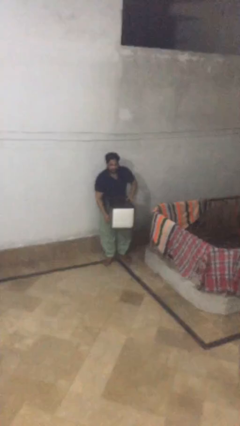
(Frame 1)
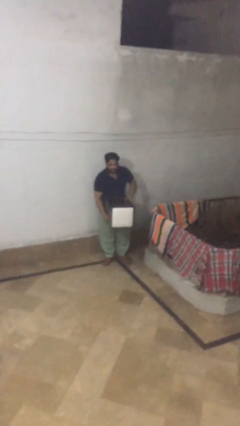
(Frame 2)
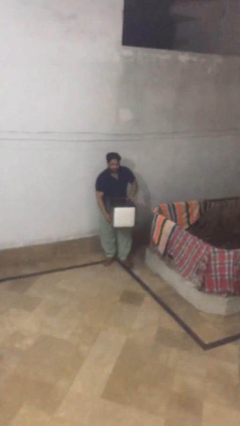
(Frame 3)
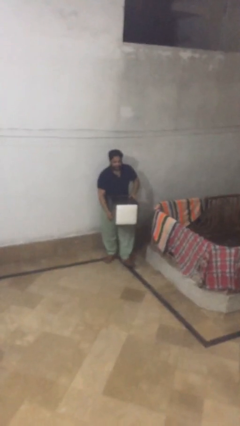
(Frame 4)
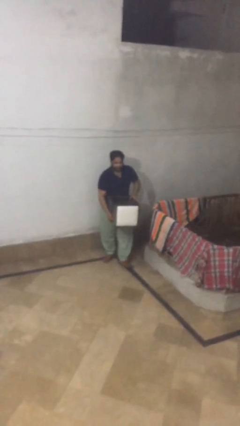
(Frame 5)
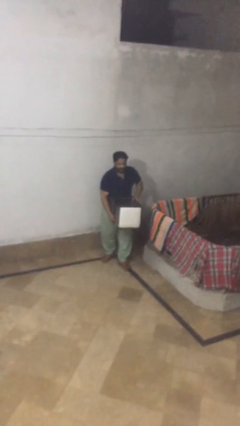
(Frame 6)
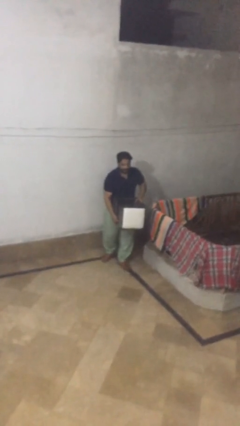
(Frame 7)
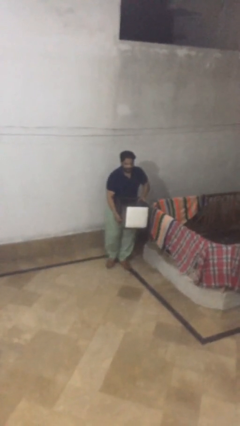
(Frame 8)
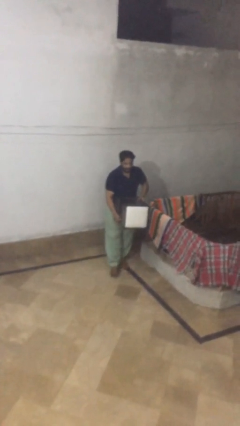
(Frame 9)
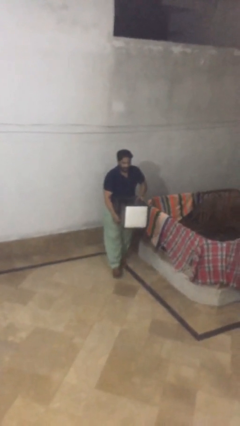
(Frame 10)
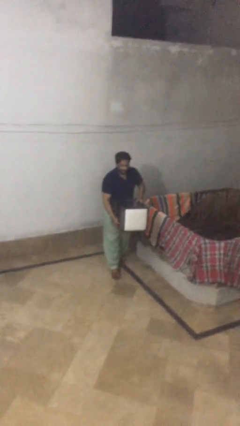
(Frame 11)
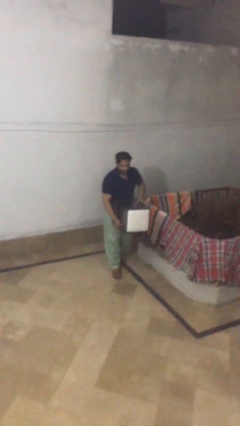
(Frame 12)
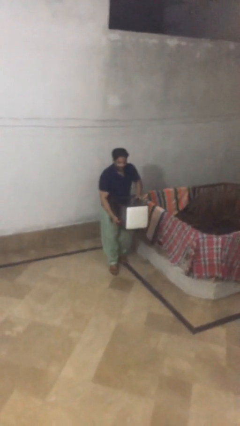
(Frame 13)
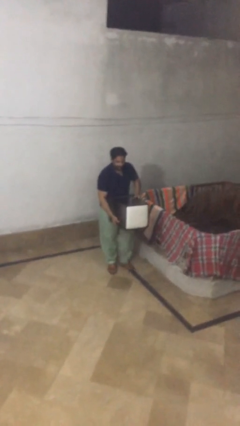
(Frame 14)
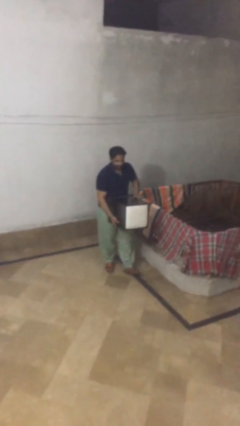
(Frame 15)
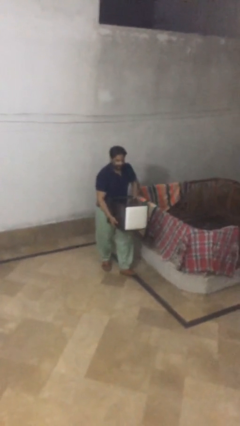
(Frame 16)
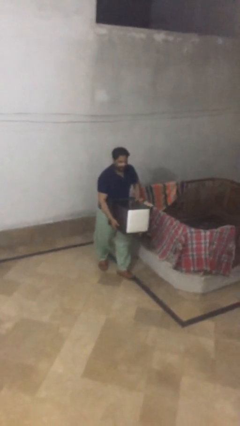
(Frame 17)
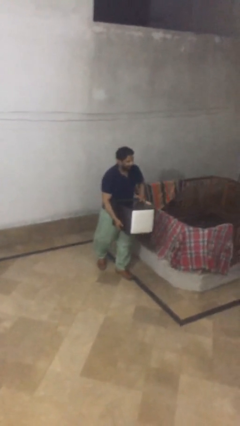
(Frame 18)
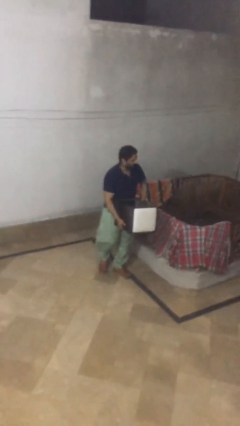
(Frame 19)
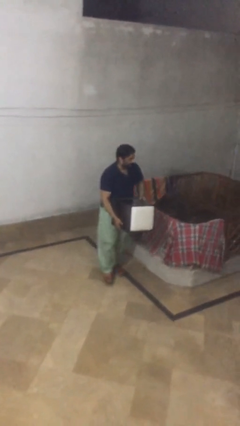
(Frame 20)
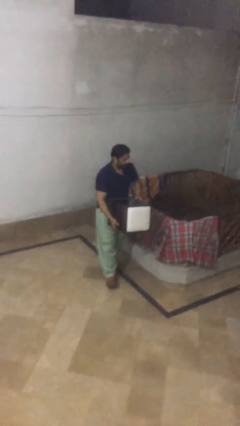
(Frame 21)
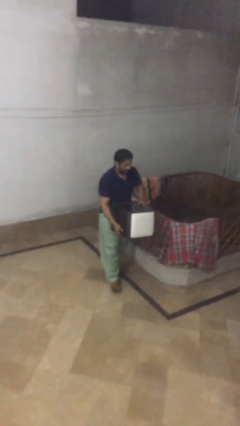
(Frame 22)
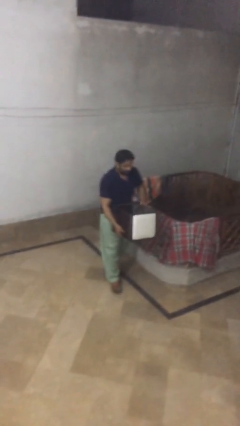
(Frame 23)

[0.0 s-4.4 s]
person carries heavy object

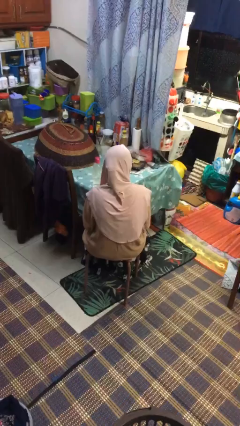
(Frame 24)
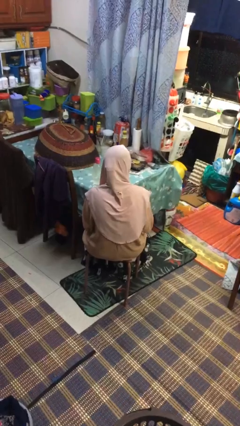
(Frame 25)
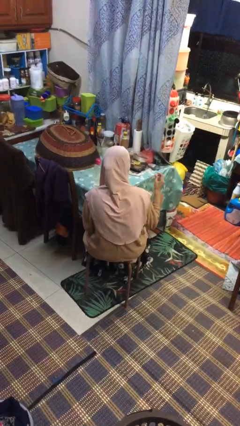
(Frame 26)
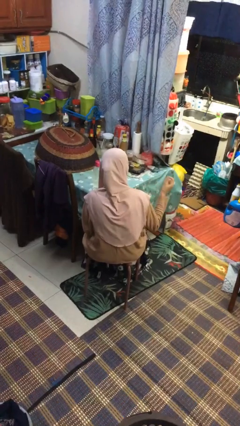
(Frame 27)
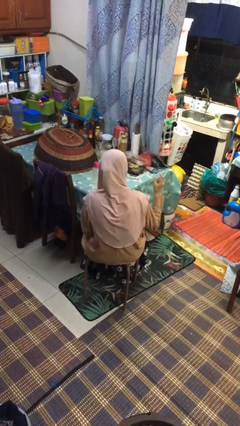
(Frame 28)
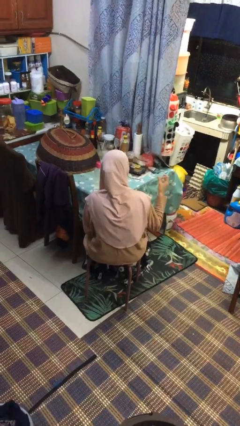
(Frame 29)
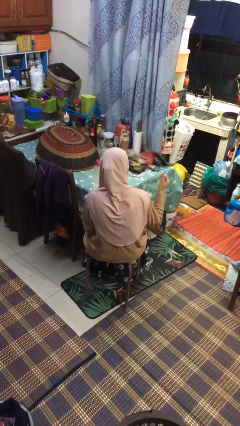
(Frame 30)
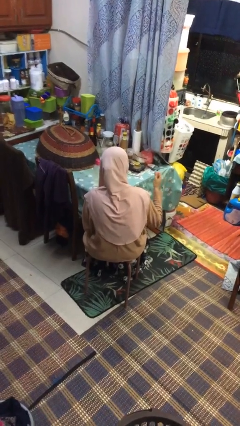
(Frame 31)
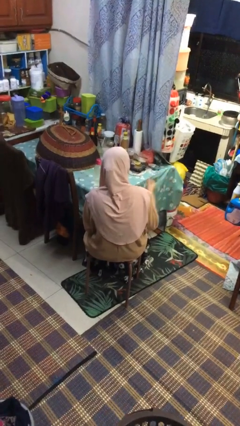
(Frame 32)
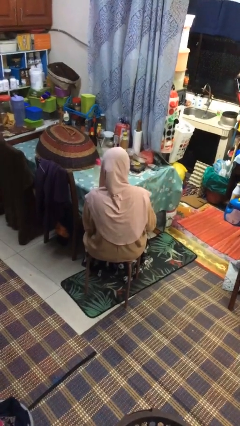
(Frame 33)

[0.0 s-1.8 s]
person snaps fingers

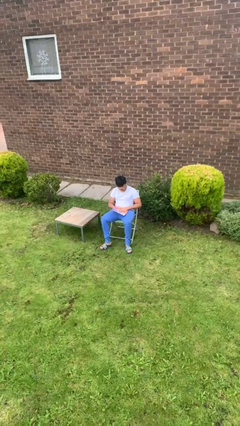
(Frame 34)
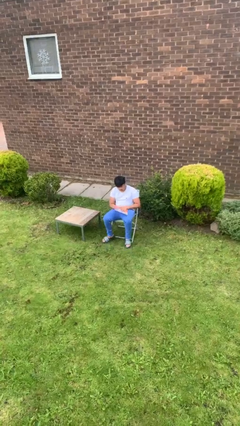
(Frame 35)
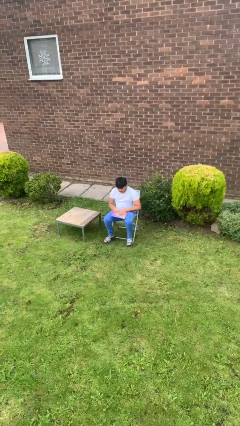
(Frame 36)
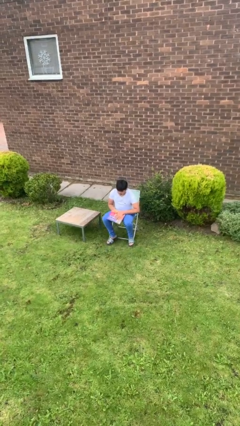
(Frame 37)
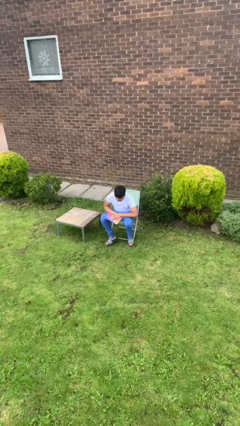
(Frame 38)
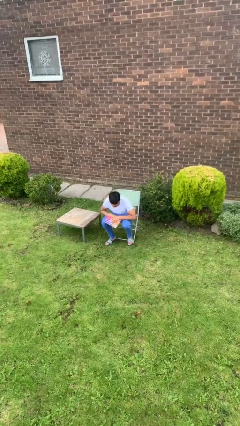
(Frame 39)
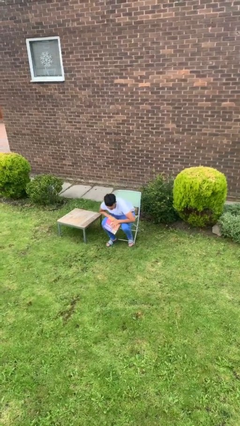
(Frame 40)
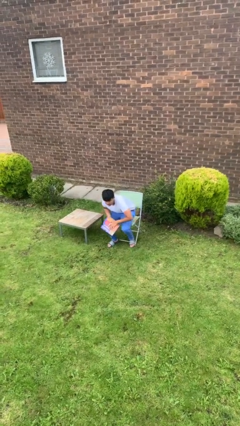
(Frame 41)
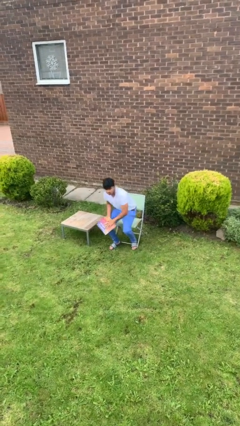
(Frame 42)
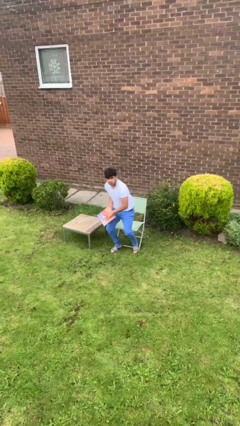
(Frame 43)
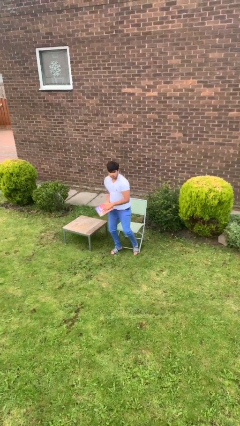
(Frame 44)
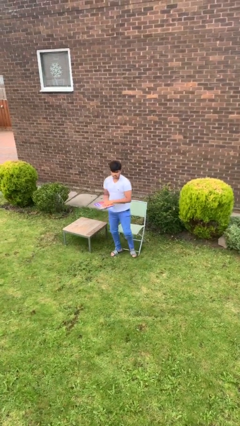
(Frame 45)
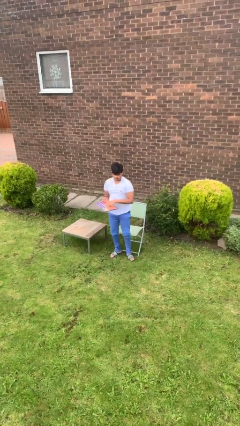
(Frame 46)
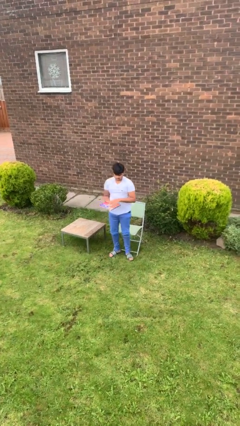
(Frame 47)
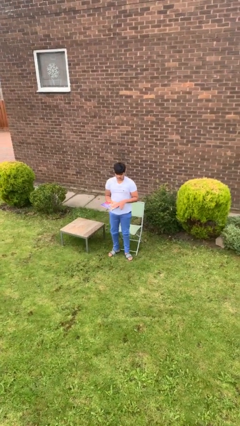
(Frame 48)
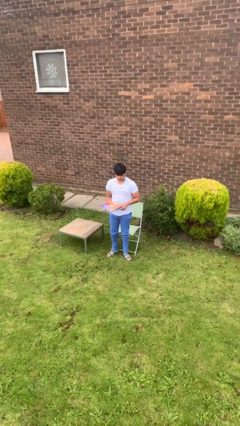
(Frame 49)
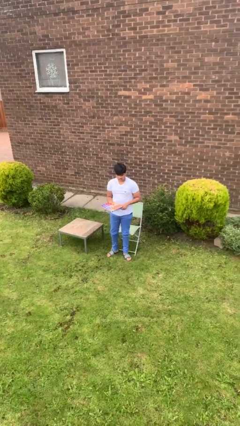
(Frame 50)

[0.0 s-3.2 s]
person stands up

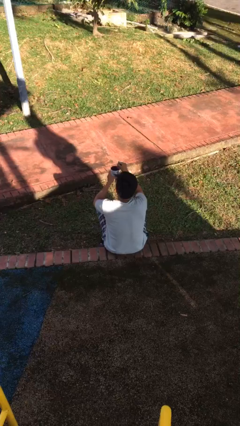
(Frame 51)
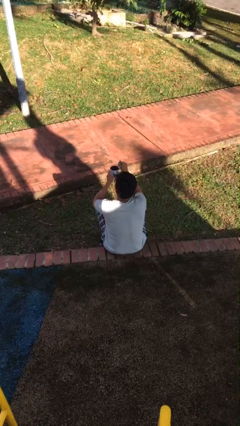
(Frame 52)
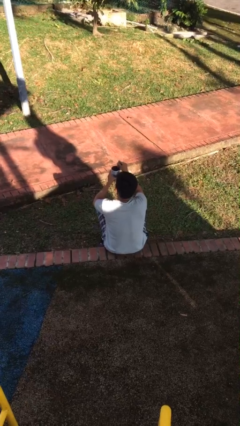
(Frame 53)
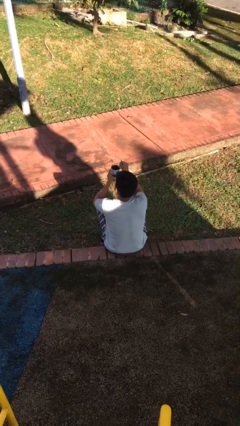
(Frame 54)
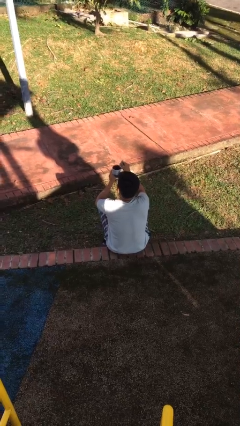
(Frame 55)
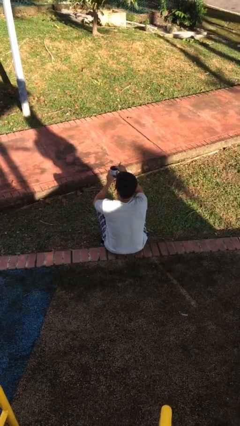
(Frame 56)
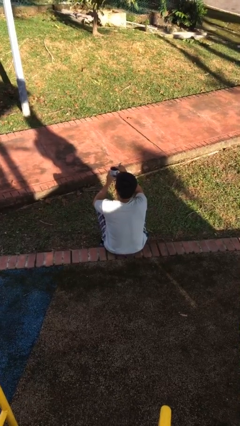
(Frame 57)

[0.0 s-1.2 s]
person stirs mug

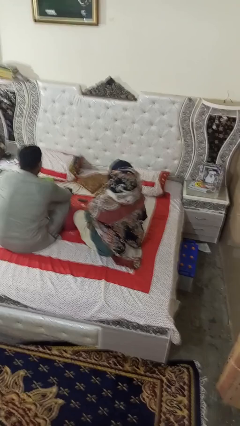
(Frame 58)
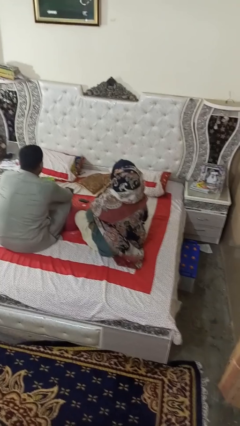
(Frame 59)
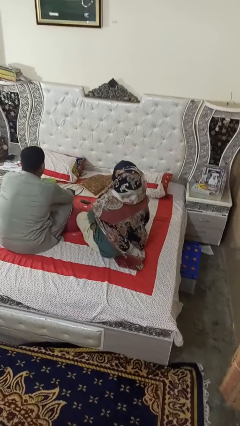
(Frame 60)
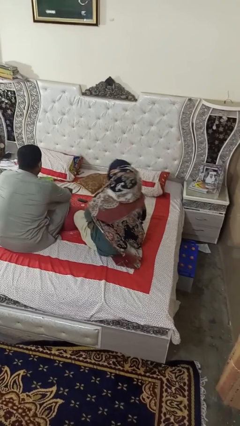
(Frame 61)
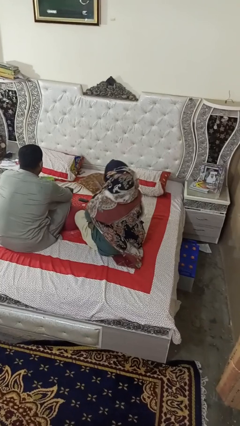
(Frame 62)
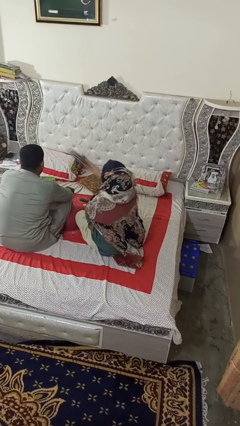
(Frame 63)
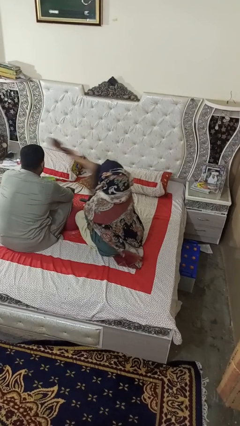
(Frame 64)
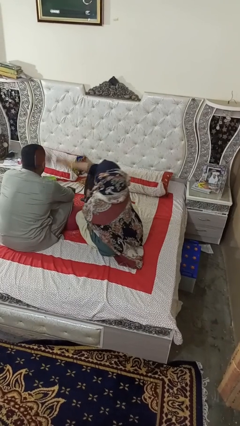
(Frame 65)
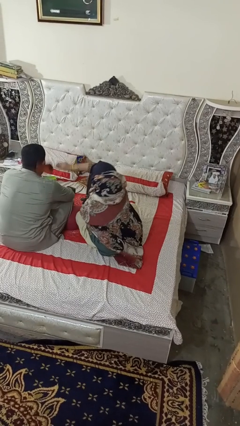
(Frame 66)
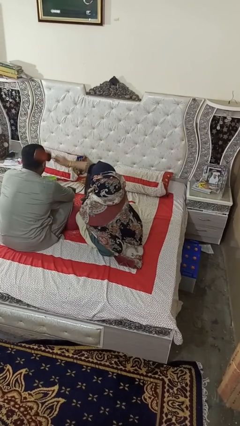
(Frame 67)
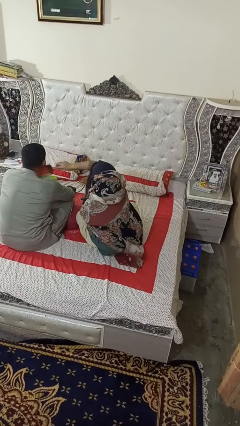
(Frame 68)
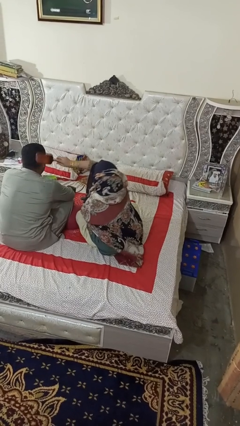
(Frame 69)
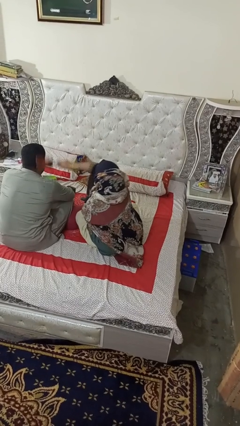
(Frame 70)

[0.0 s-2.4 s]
person brushes hair of person

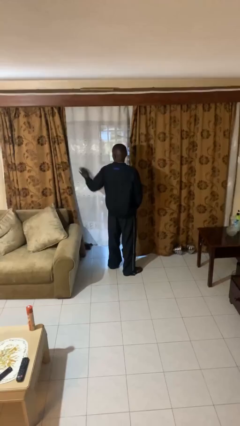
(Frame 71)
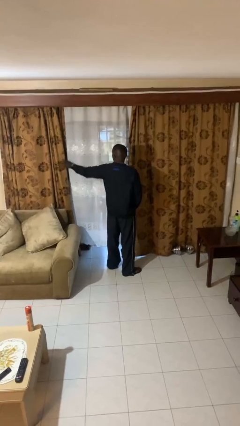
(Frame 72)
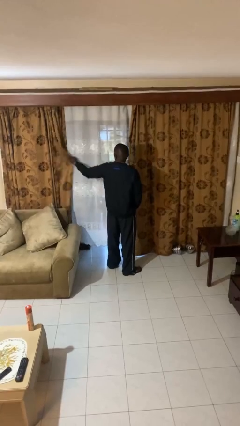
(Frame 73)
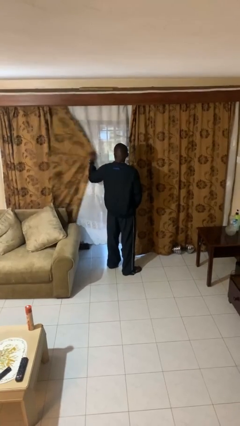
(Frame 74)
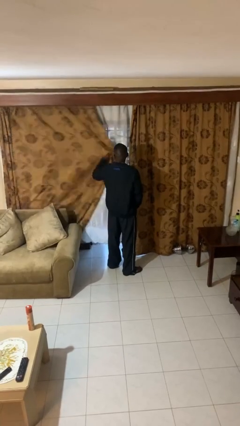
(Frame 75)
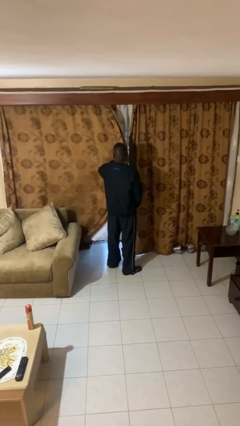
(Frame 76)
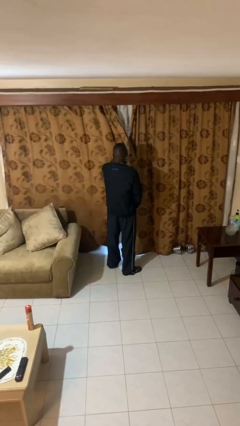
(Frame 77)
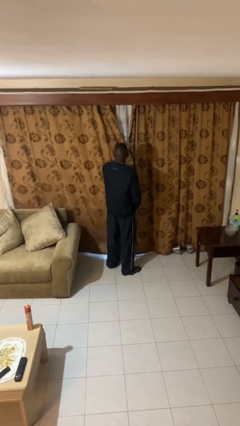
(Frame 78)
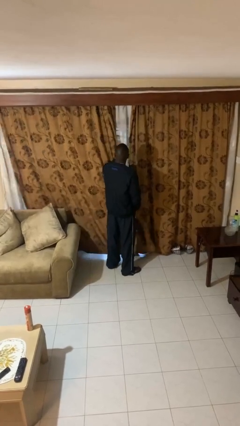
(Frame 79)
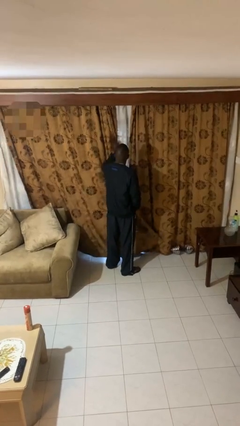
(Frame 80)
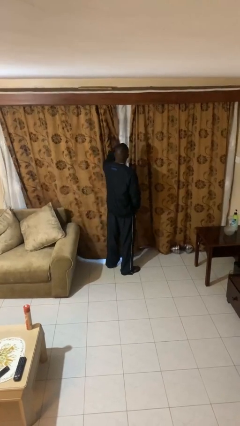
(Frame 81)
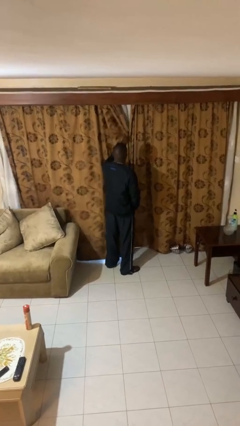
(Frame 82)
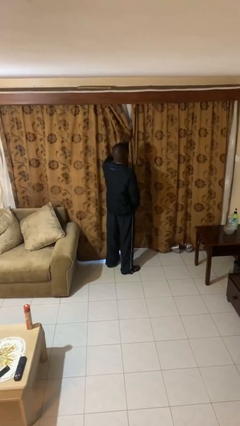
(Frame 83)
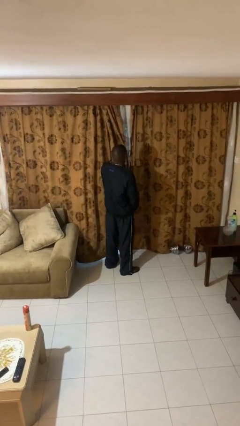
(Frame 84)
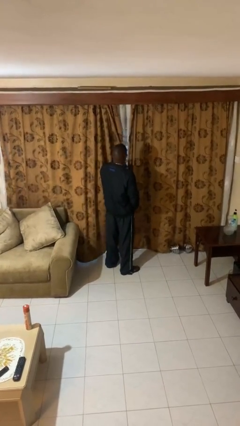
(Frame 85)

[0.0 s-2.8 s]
person closes curtains

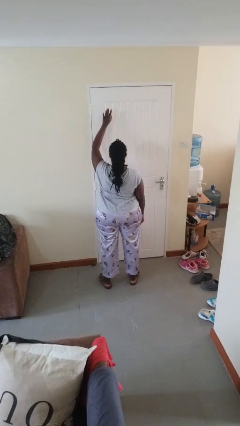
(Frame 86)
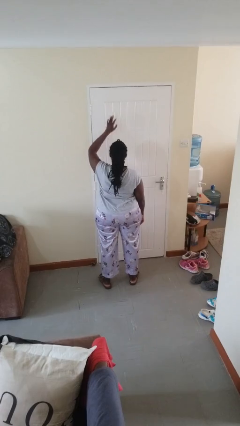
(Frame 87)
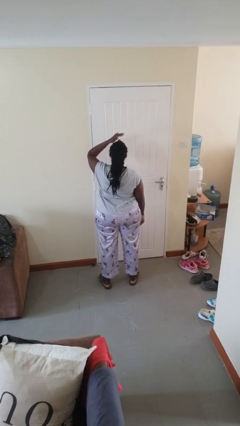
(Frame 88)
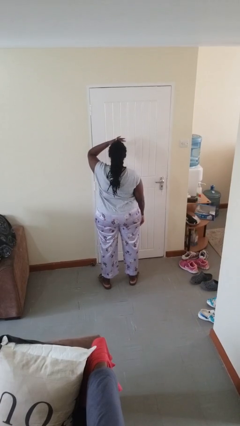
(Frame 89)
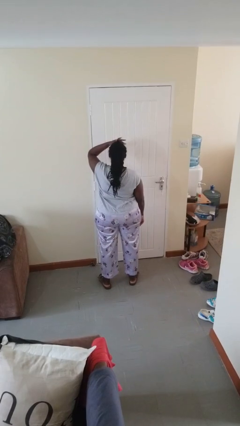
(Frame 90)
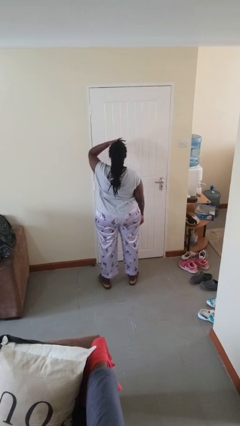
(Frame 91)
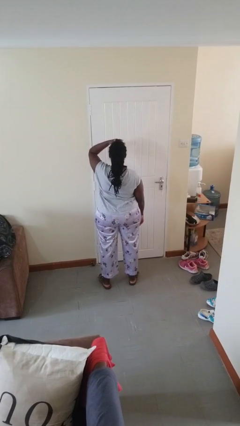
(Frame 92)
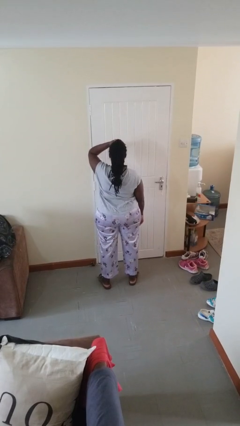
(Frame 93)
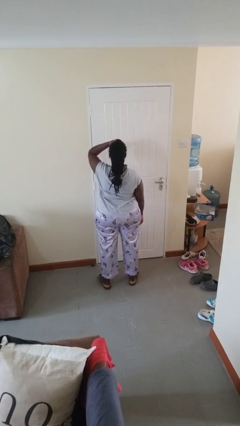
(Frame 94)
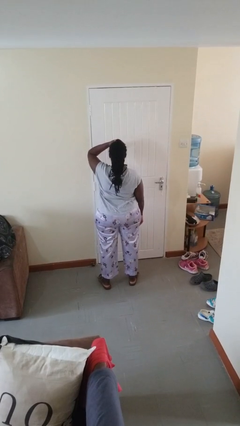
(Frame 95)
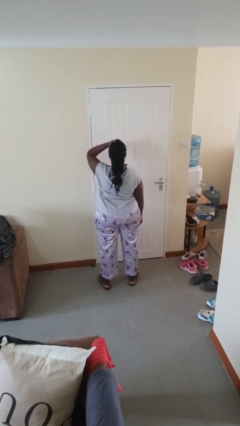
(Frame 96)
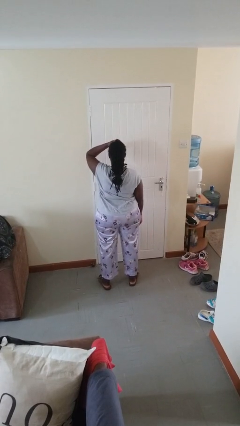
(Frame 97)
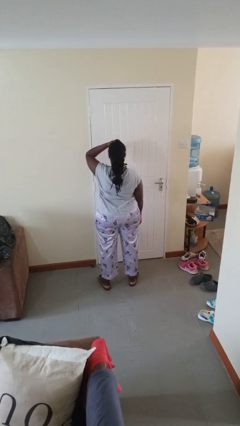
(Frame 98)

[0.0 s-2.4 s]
person gestures lower hand
